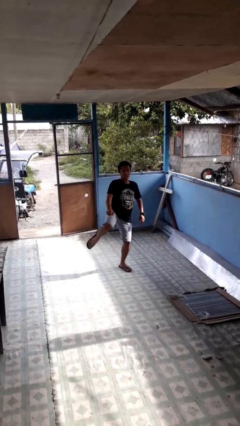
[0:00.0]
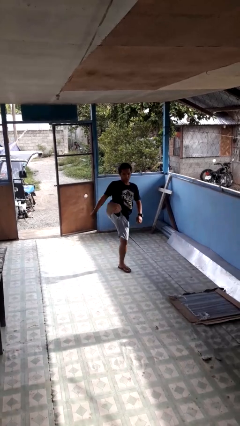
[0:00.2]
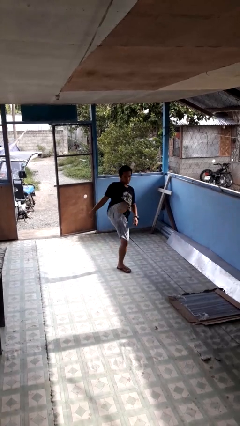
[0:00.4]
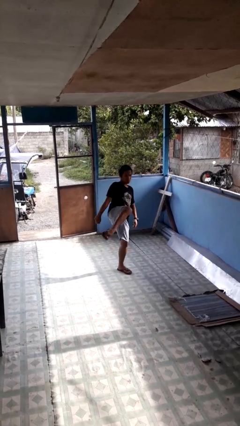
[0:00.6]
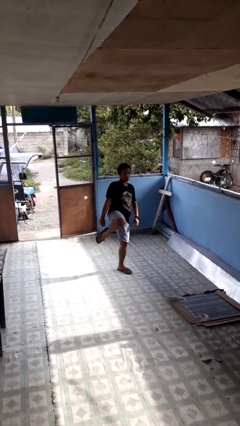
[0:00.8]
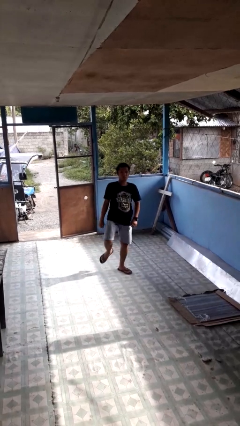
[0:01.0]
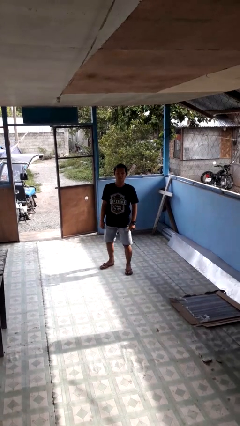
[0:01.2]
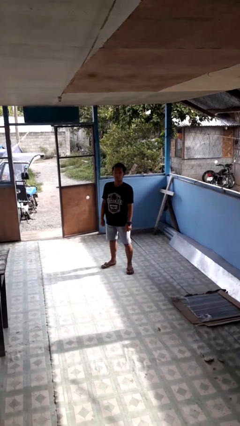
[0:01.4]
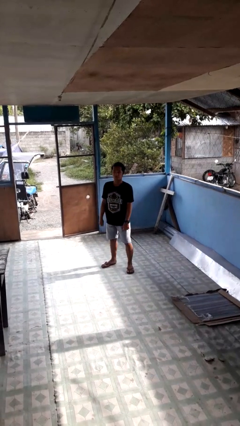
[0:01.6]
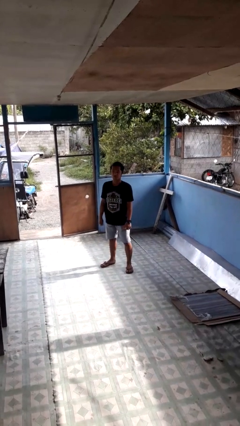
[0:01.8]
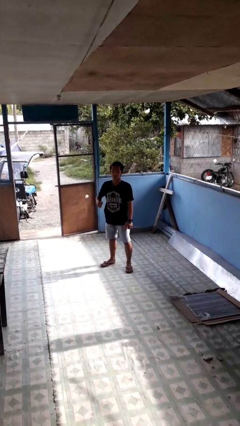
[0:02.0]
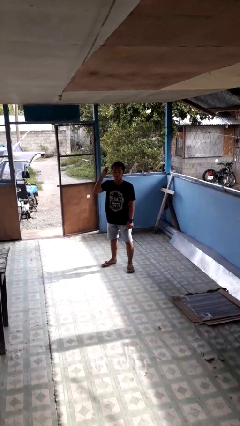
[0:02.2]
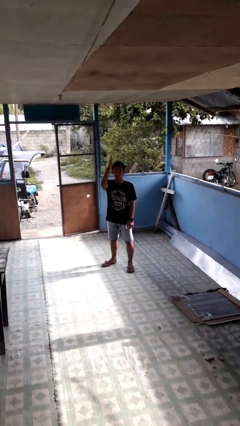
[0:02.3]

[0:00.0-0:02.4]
person karate kicks

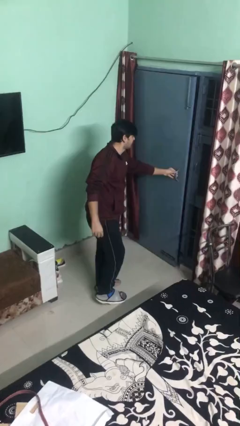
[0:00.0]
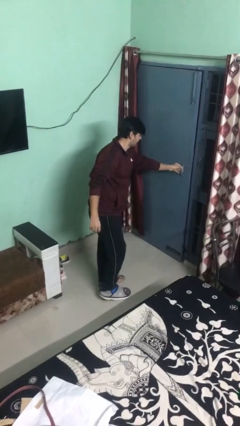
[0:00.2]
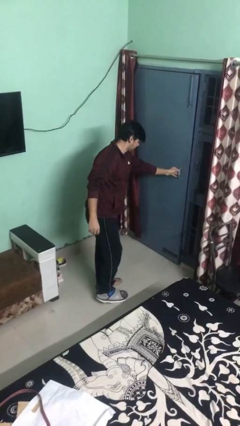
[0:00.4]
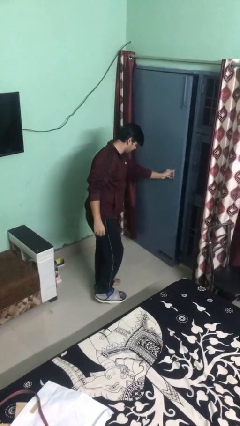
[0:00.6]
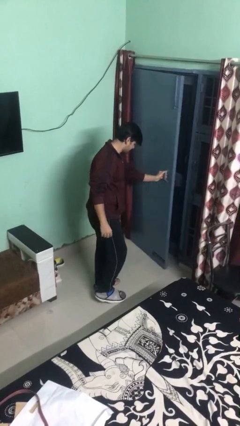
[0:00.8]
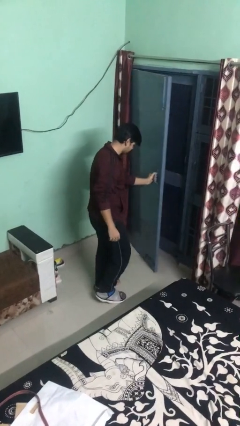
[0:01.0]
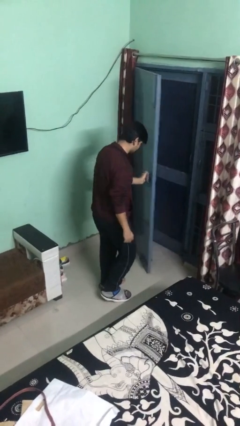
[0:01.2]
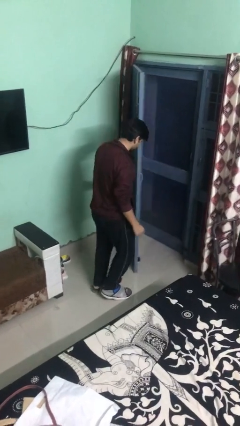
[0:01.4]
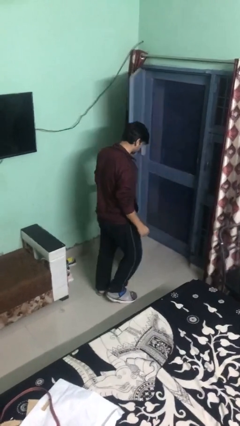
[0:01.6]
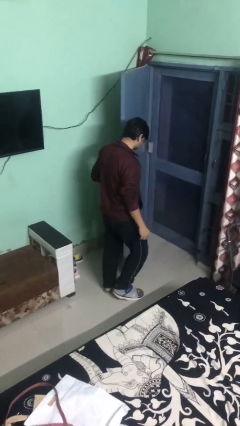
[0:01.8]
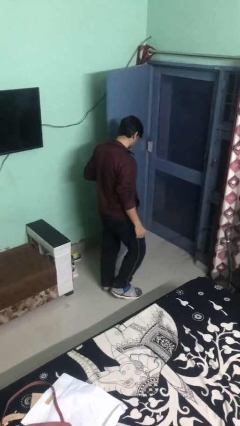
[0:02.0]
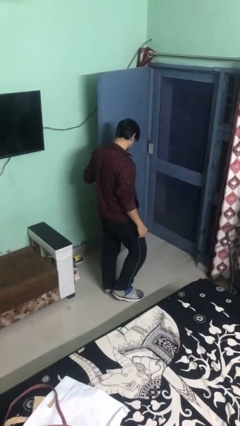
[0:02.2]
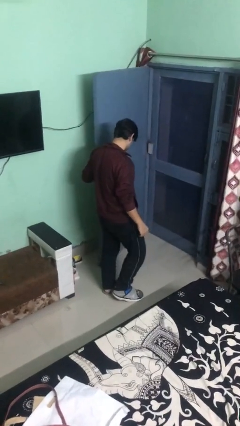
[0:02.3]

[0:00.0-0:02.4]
person opens facility door

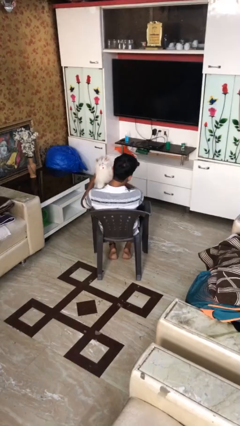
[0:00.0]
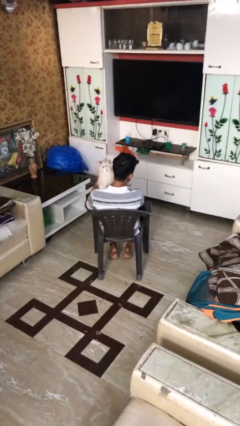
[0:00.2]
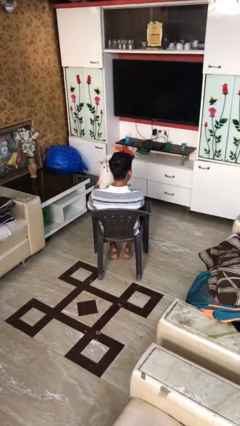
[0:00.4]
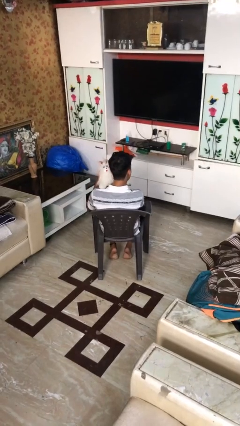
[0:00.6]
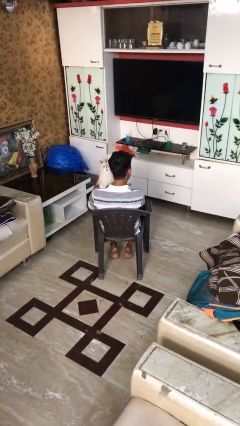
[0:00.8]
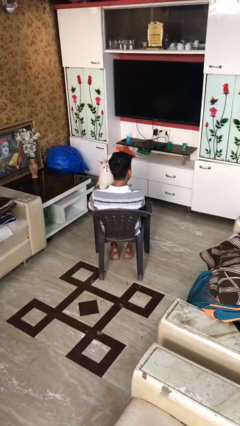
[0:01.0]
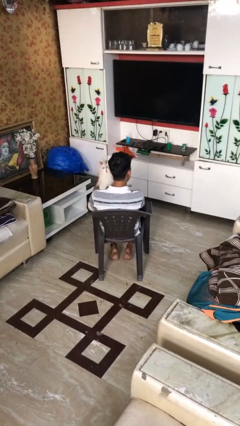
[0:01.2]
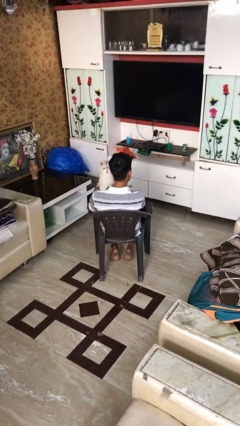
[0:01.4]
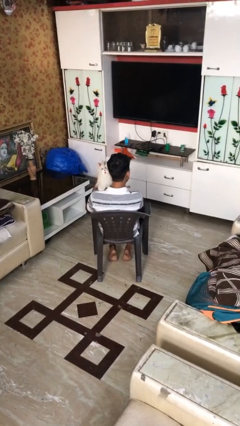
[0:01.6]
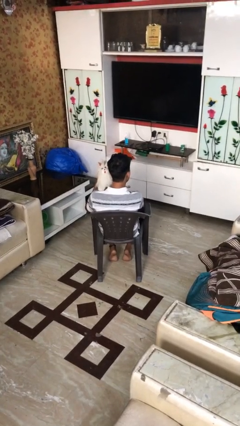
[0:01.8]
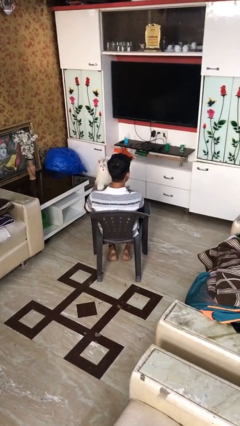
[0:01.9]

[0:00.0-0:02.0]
person hugs stuffed animal

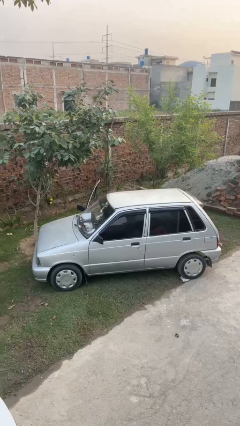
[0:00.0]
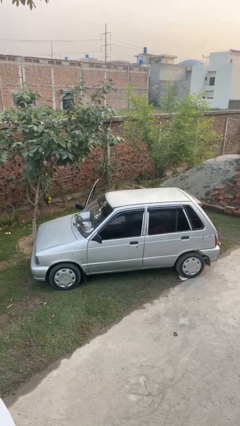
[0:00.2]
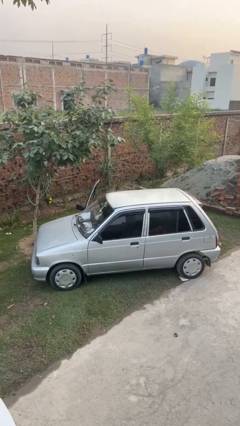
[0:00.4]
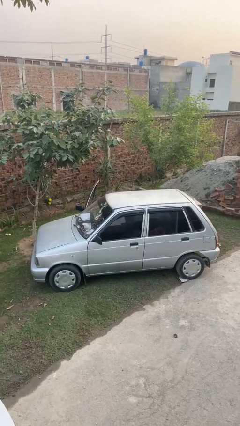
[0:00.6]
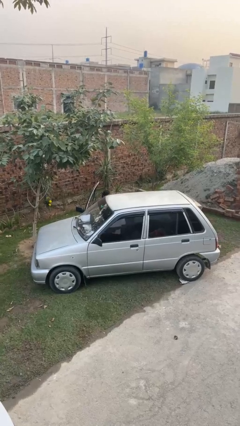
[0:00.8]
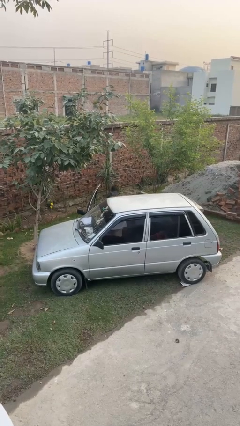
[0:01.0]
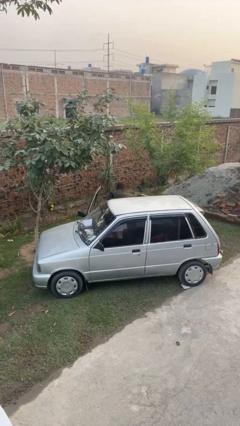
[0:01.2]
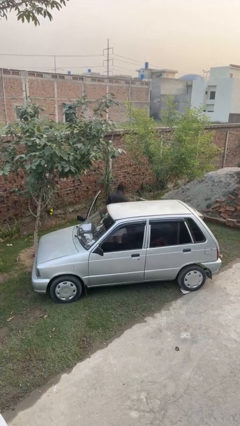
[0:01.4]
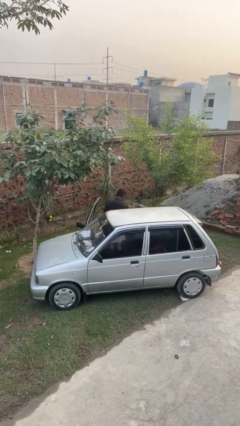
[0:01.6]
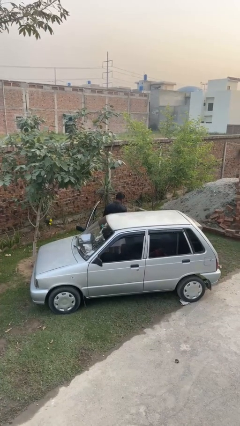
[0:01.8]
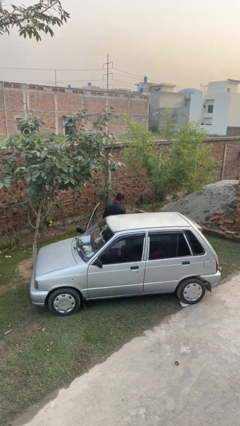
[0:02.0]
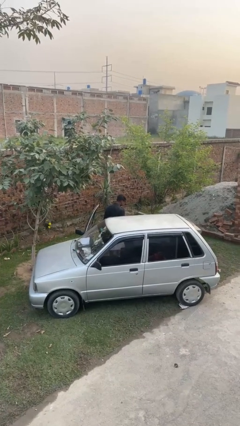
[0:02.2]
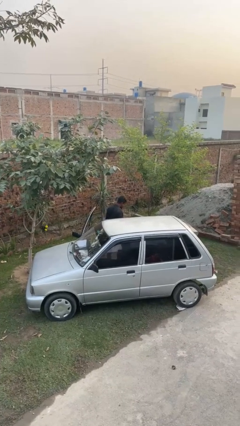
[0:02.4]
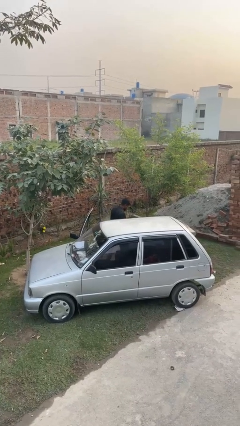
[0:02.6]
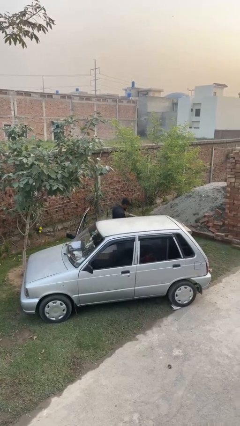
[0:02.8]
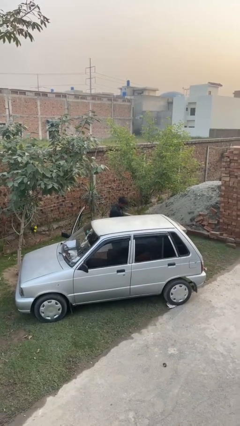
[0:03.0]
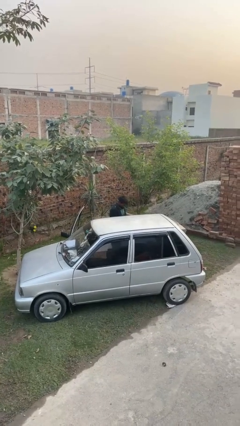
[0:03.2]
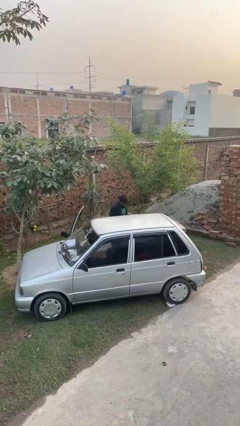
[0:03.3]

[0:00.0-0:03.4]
person exits car

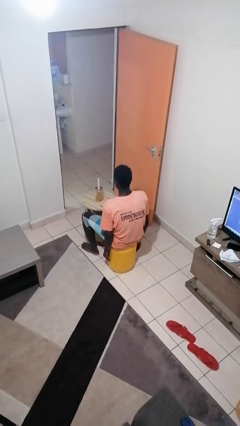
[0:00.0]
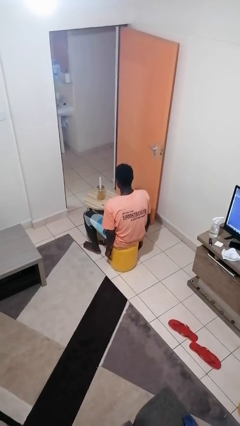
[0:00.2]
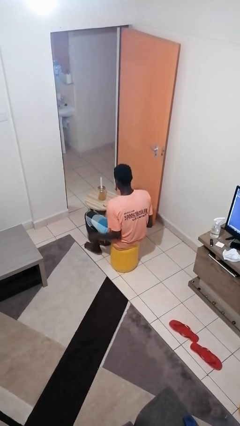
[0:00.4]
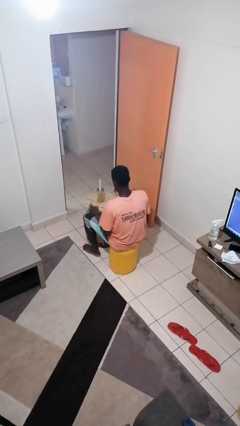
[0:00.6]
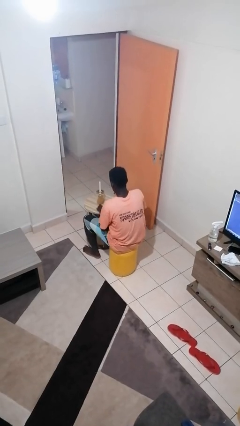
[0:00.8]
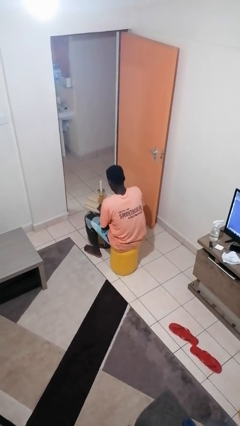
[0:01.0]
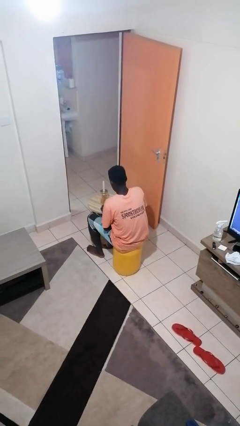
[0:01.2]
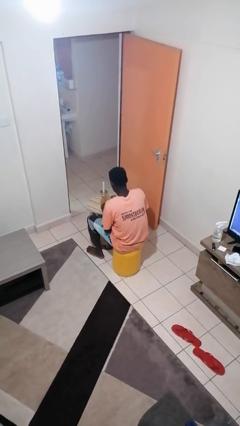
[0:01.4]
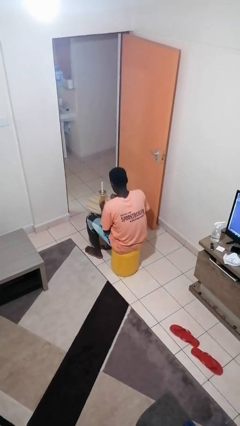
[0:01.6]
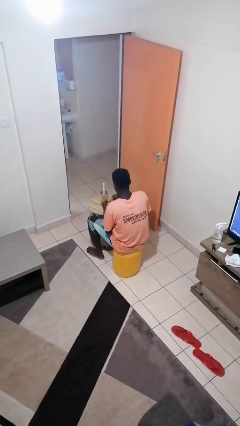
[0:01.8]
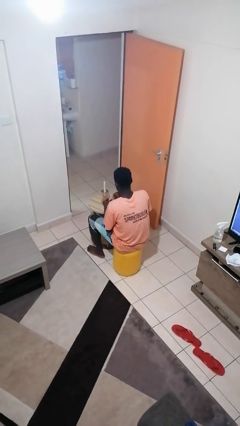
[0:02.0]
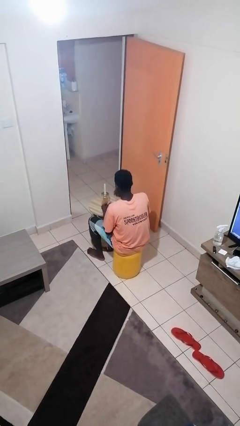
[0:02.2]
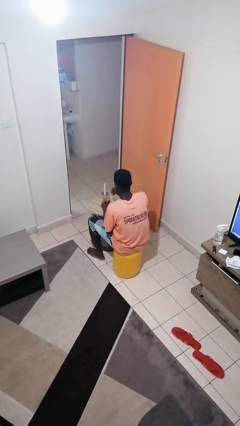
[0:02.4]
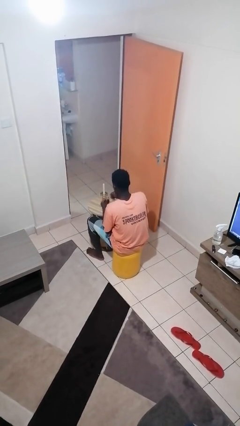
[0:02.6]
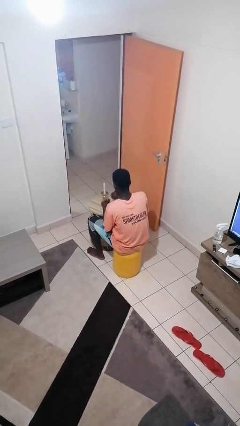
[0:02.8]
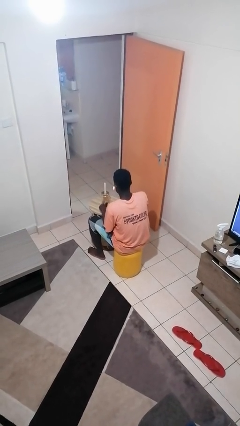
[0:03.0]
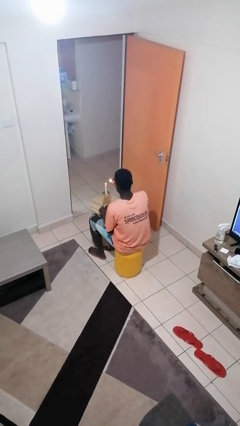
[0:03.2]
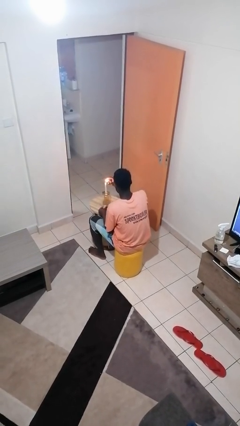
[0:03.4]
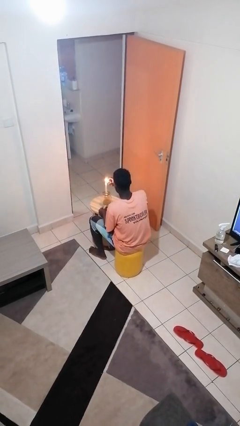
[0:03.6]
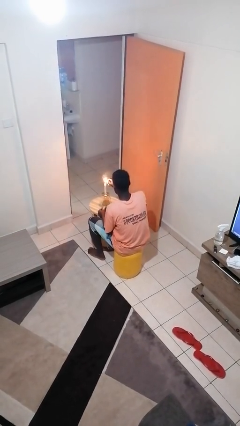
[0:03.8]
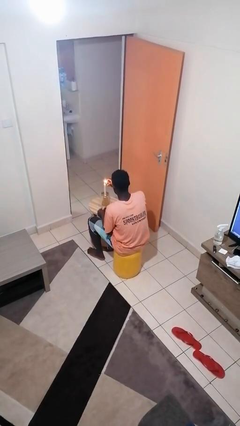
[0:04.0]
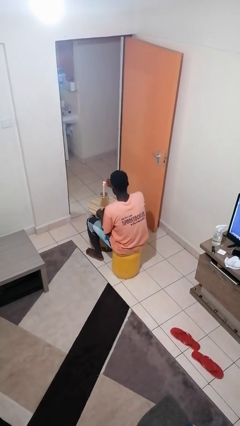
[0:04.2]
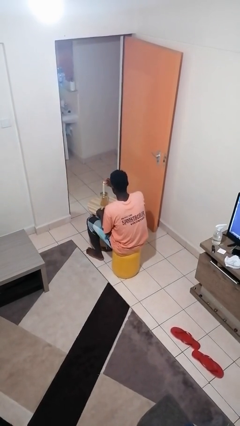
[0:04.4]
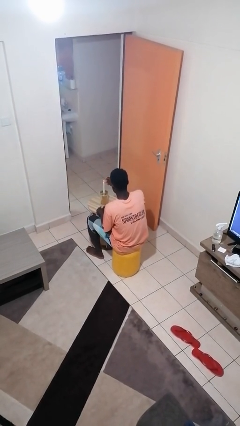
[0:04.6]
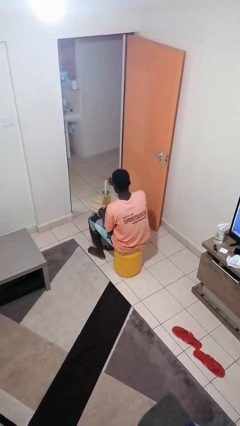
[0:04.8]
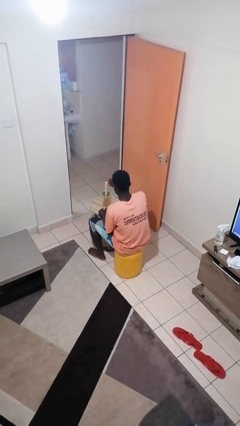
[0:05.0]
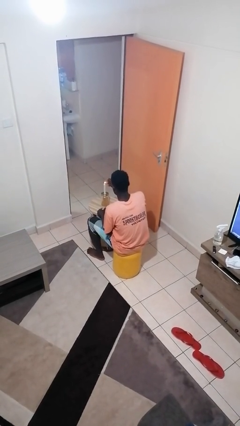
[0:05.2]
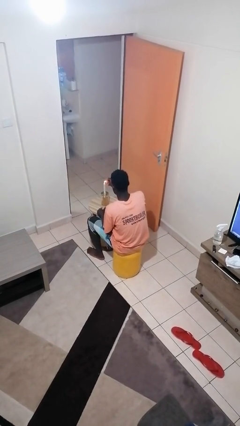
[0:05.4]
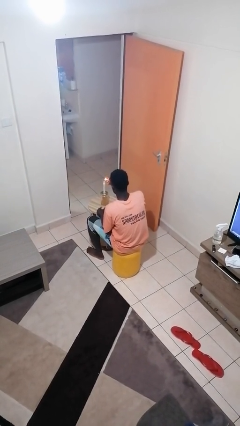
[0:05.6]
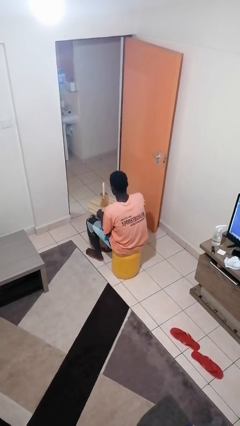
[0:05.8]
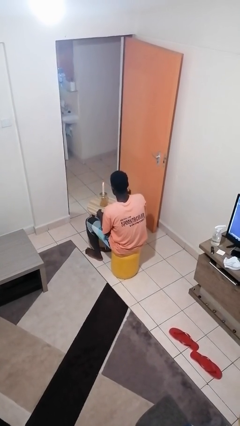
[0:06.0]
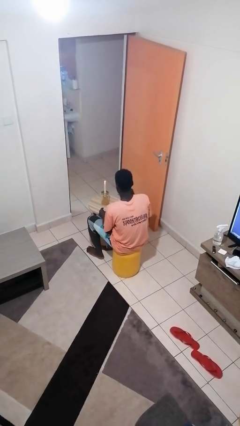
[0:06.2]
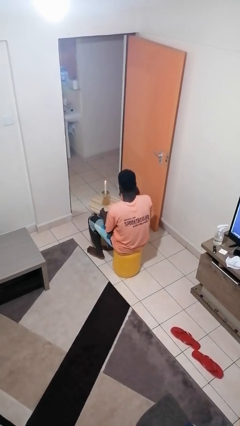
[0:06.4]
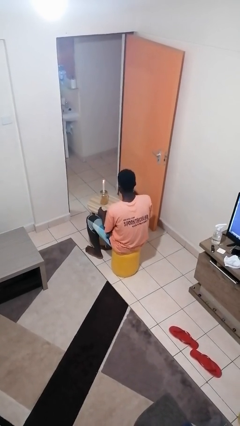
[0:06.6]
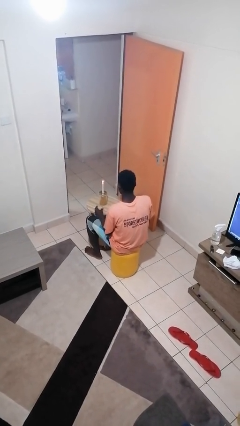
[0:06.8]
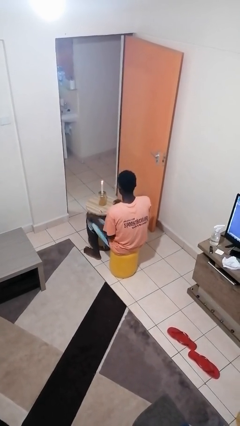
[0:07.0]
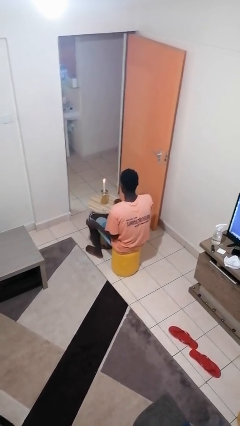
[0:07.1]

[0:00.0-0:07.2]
person lights candle
